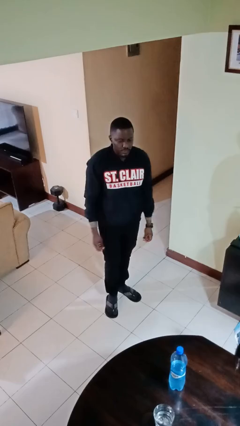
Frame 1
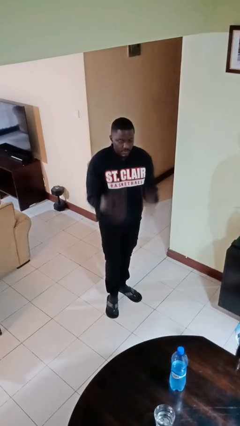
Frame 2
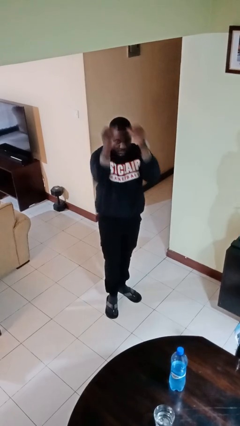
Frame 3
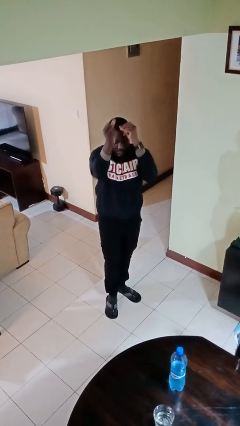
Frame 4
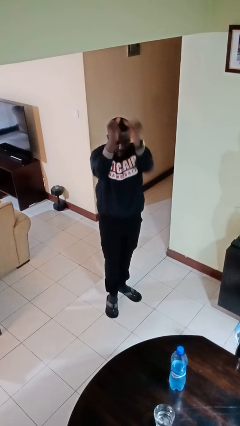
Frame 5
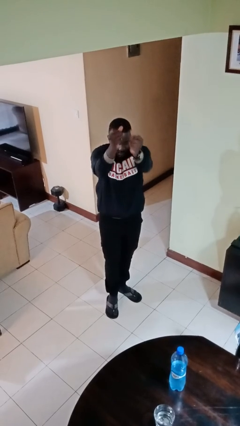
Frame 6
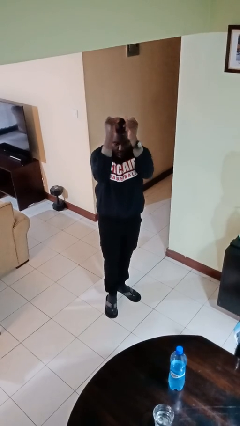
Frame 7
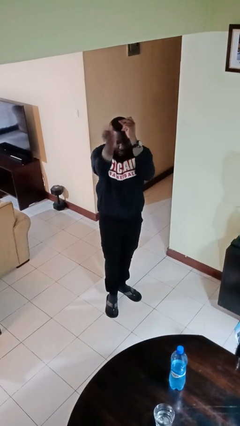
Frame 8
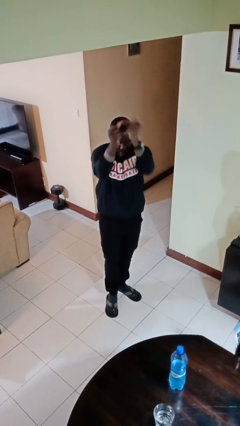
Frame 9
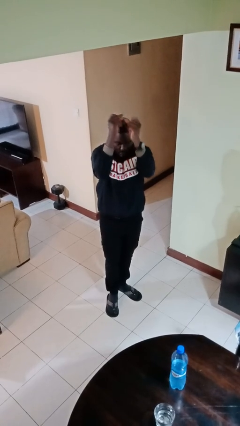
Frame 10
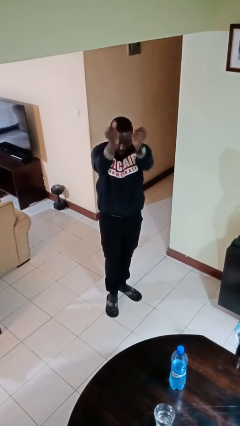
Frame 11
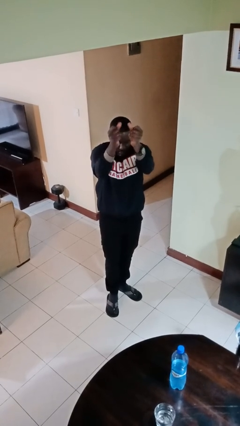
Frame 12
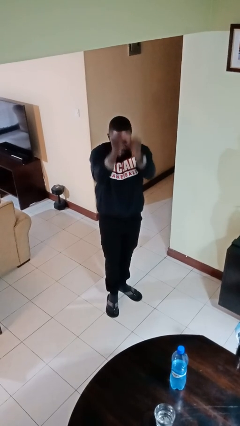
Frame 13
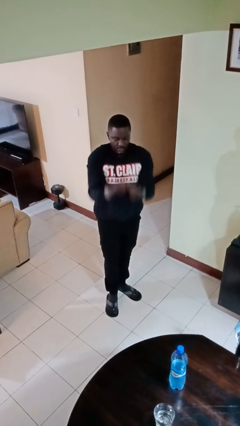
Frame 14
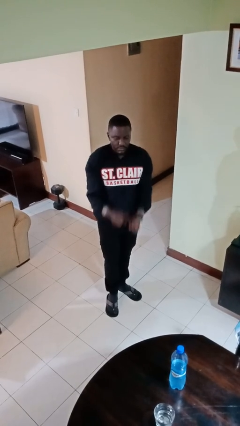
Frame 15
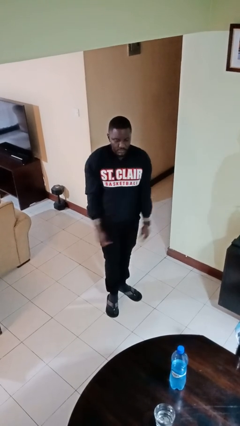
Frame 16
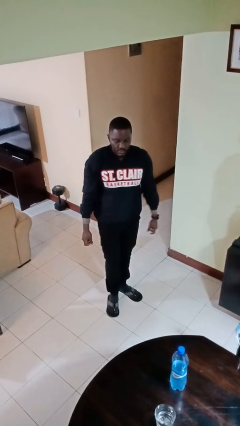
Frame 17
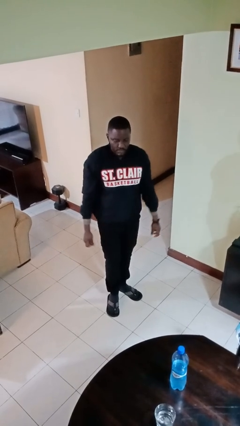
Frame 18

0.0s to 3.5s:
person snaps fingers

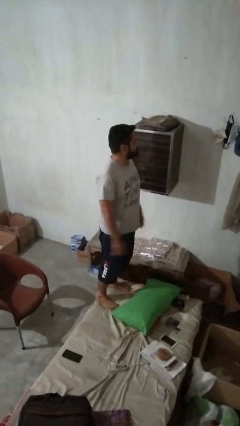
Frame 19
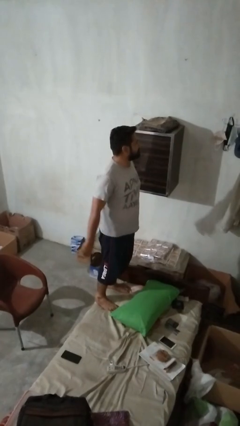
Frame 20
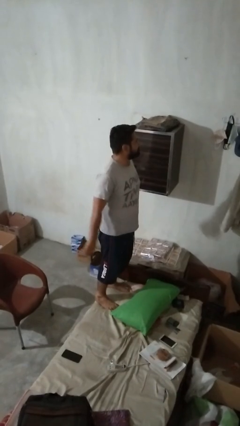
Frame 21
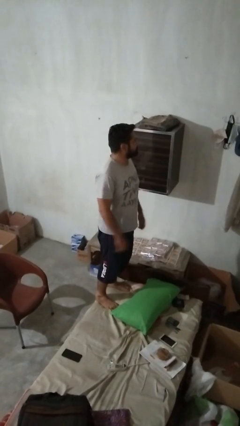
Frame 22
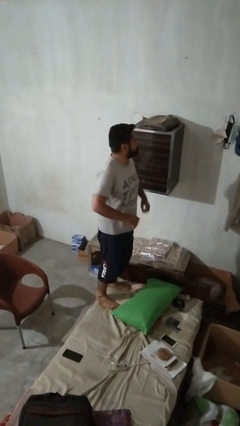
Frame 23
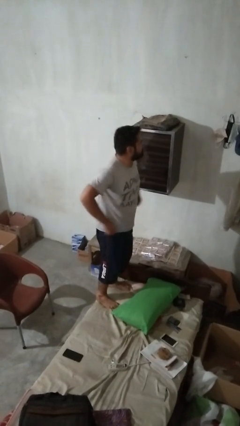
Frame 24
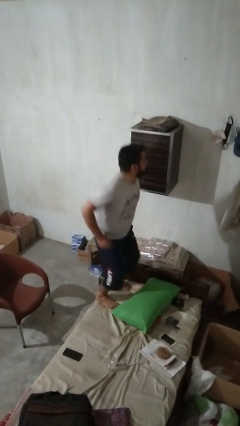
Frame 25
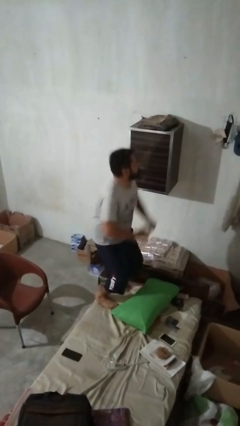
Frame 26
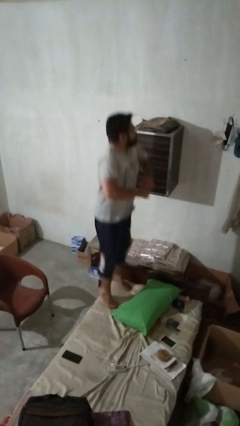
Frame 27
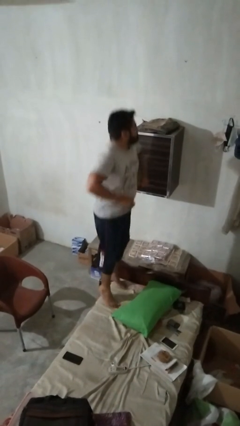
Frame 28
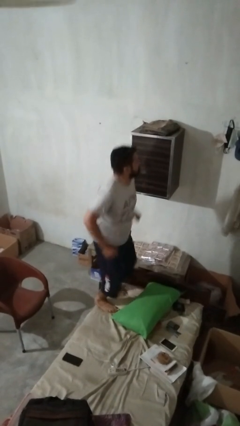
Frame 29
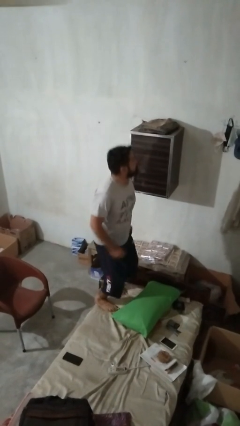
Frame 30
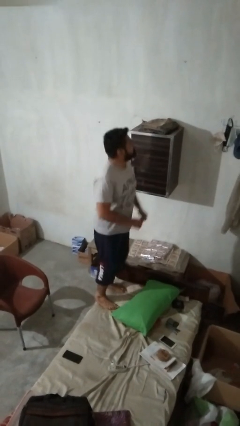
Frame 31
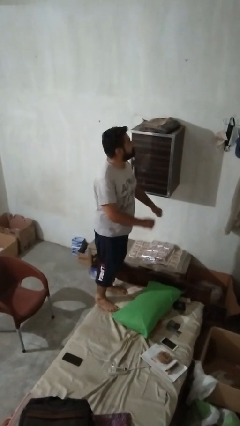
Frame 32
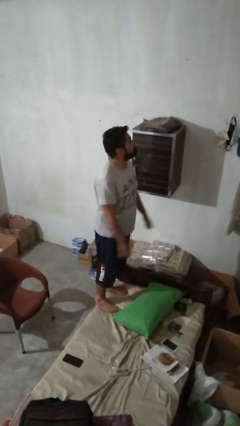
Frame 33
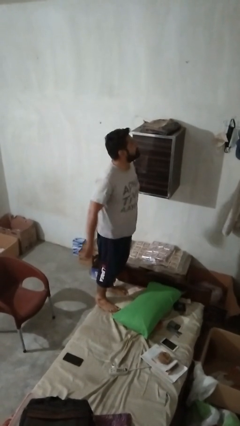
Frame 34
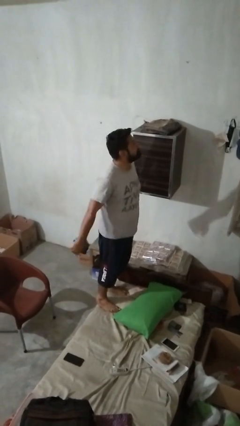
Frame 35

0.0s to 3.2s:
person jumps on couch

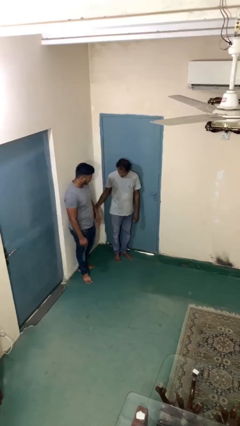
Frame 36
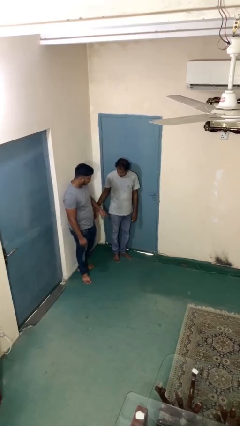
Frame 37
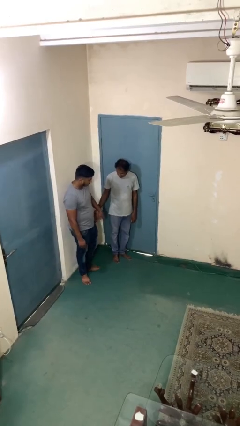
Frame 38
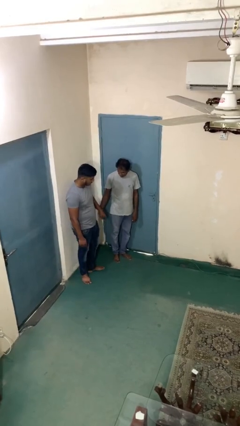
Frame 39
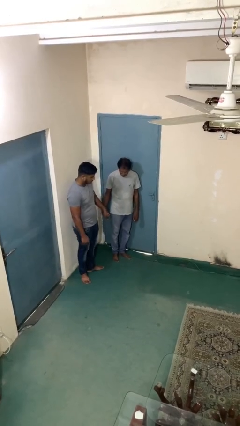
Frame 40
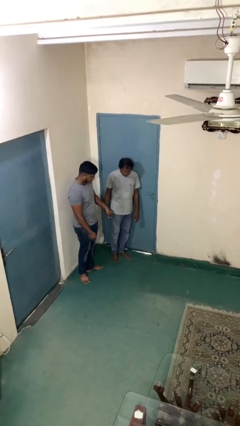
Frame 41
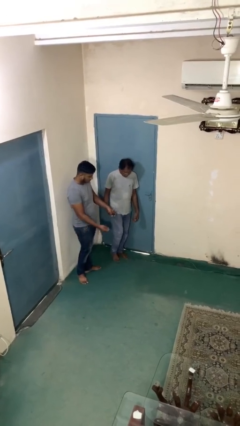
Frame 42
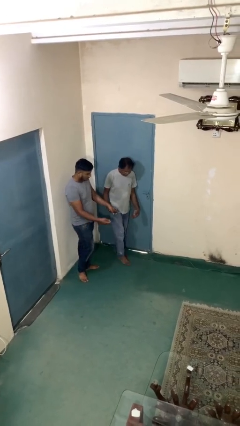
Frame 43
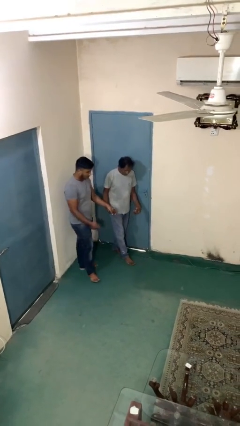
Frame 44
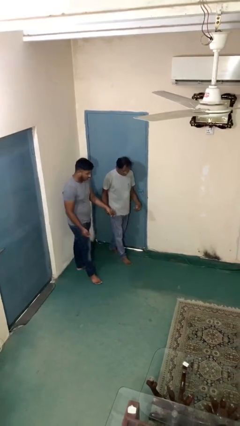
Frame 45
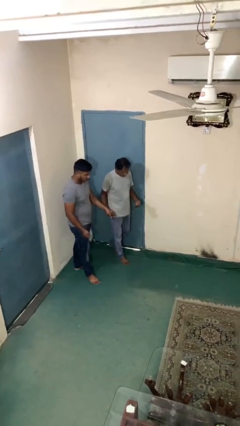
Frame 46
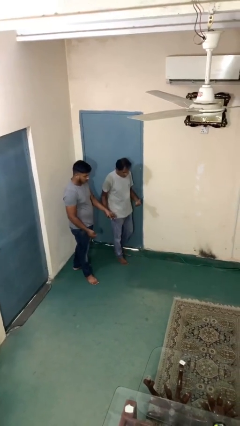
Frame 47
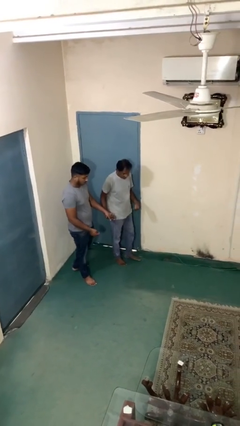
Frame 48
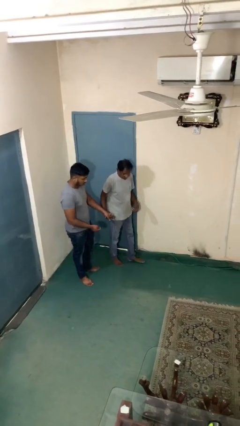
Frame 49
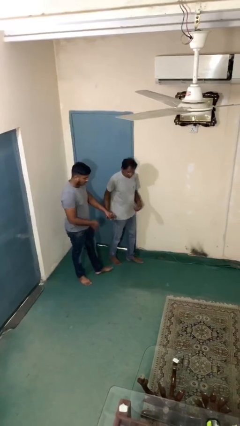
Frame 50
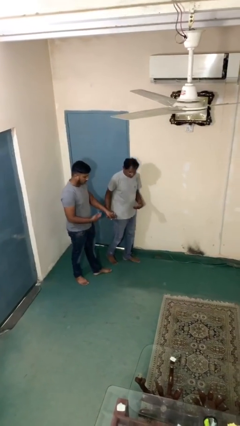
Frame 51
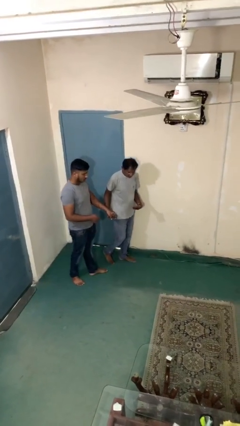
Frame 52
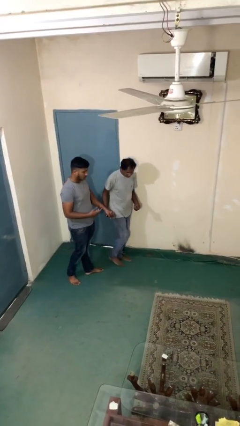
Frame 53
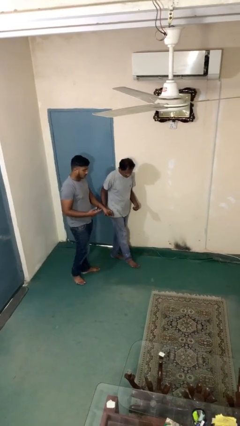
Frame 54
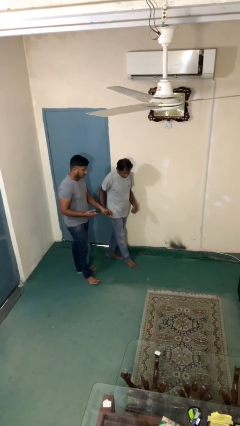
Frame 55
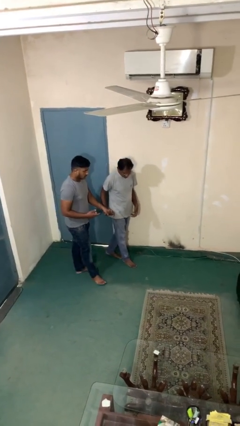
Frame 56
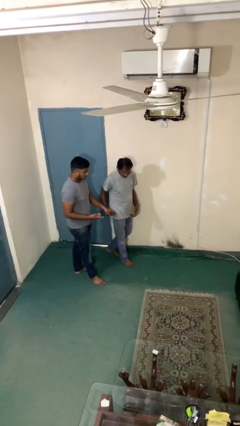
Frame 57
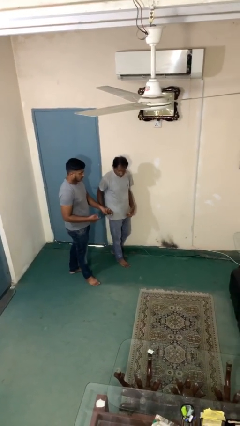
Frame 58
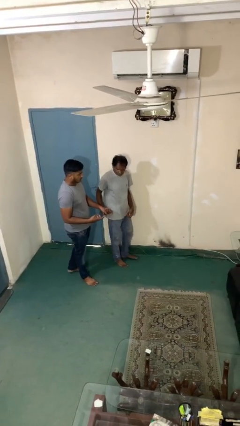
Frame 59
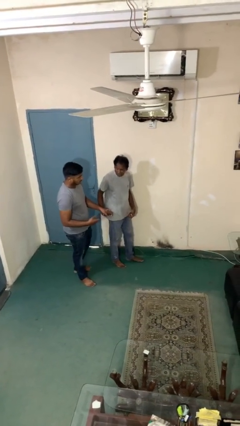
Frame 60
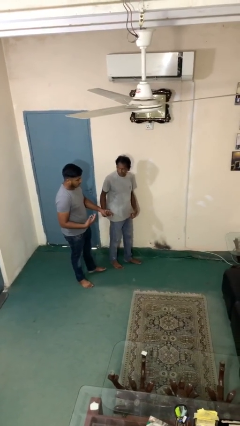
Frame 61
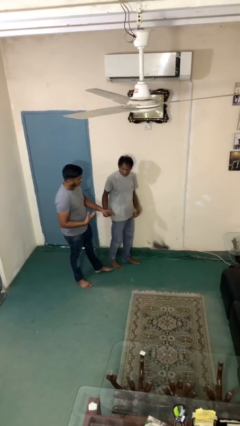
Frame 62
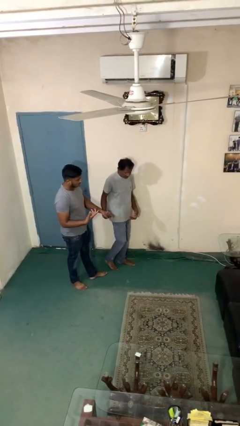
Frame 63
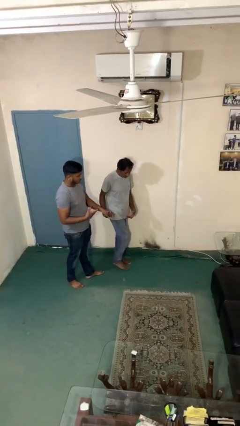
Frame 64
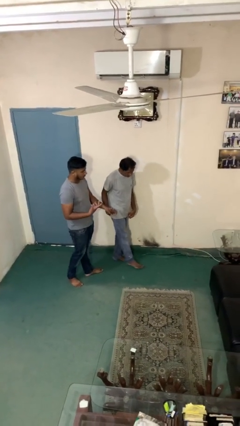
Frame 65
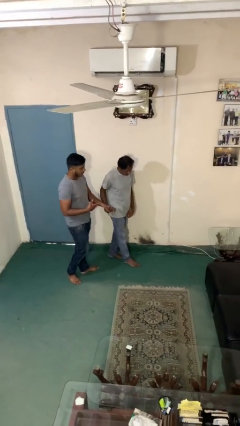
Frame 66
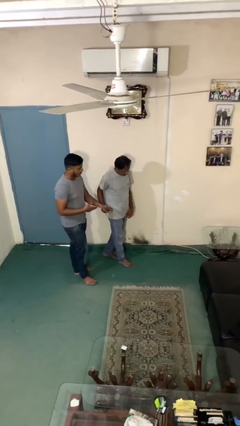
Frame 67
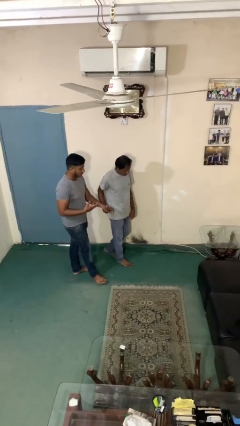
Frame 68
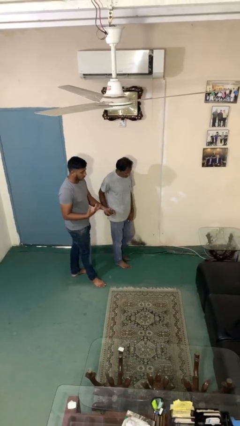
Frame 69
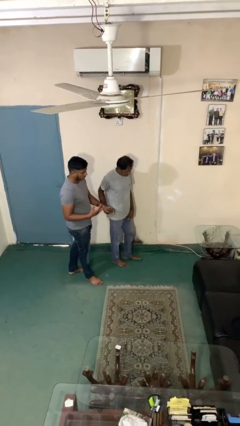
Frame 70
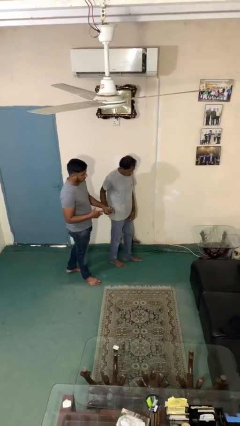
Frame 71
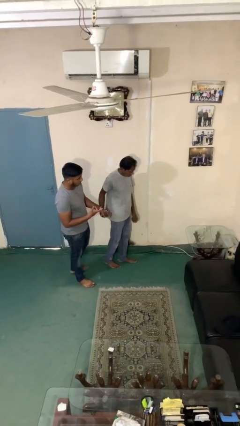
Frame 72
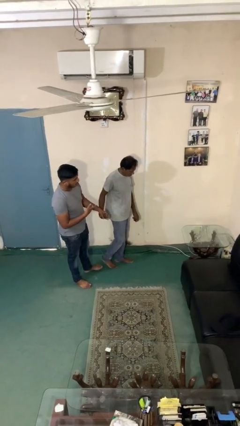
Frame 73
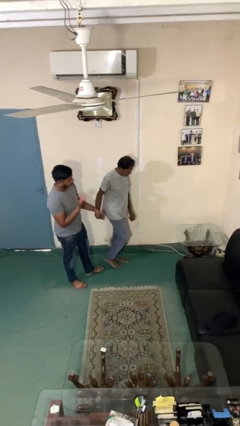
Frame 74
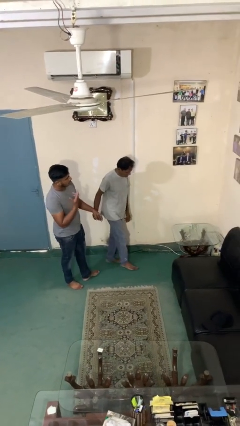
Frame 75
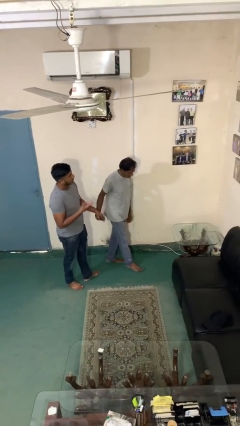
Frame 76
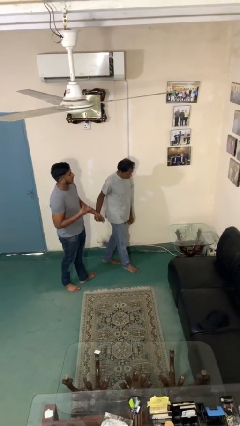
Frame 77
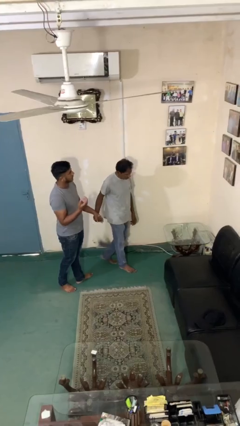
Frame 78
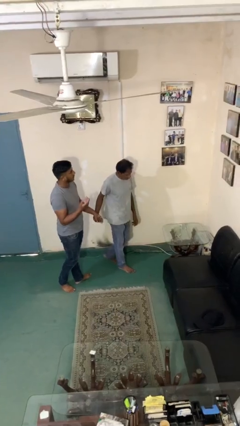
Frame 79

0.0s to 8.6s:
person holds hand

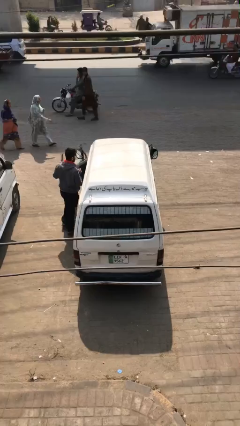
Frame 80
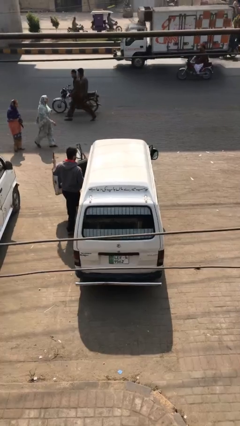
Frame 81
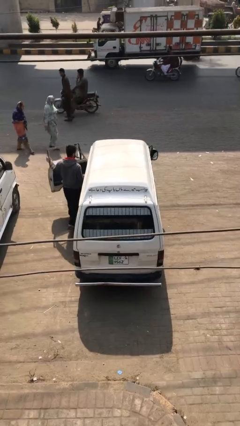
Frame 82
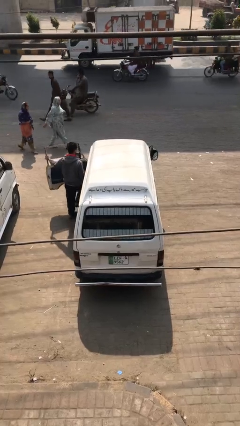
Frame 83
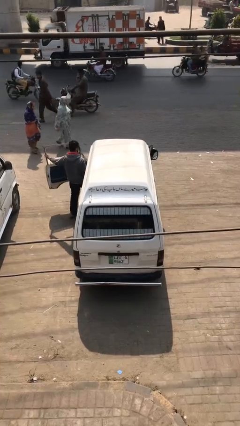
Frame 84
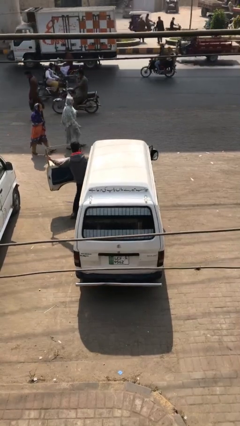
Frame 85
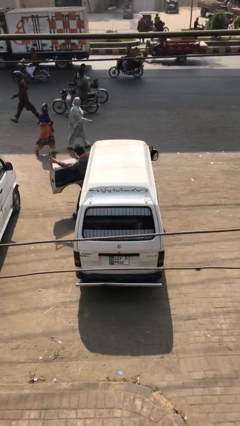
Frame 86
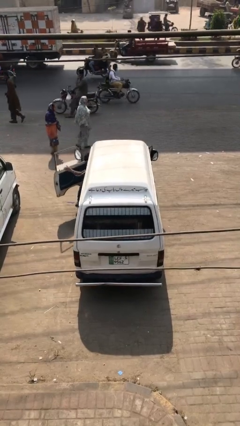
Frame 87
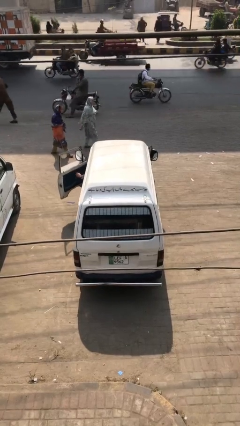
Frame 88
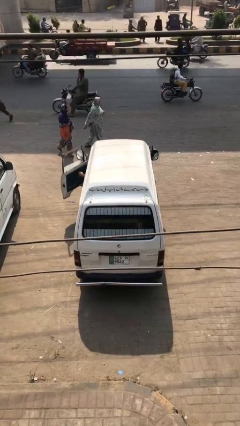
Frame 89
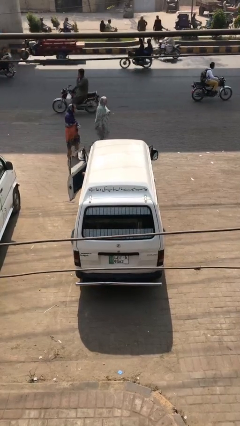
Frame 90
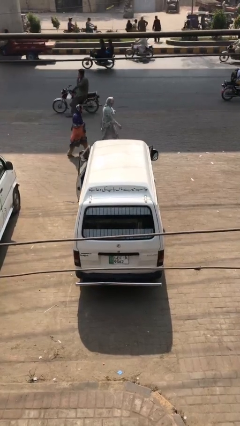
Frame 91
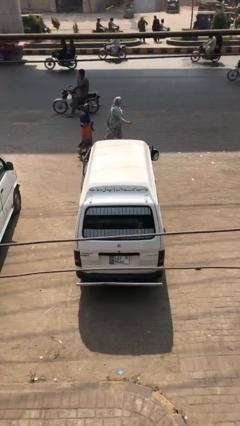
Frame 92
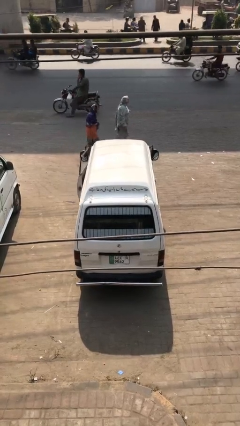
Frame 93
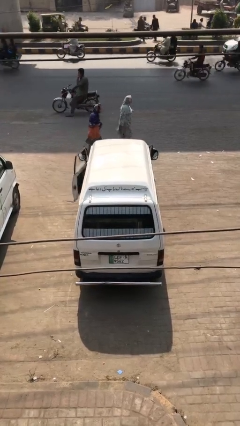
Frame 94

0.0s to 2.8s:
car picks up person
